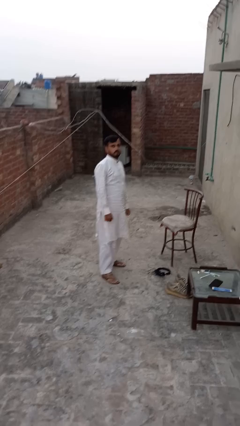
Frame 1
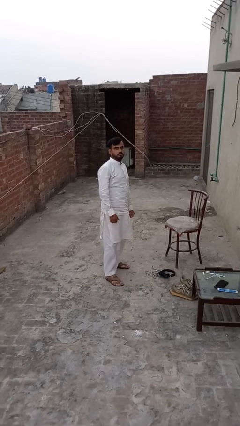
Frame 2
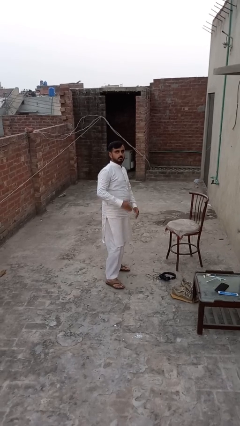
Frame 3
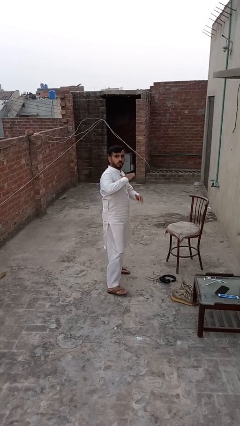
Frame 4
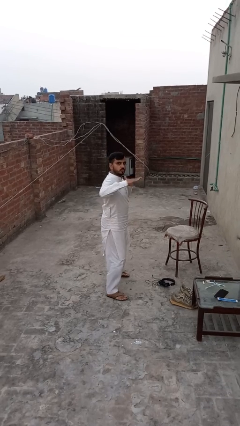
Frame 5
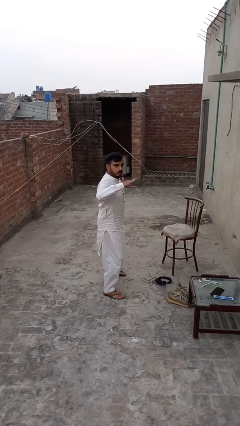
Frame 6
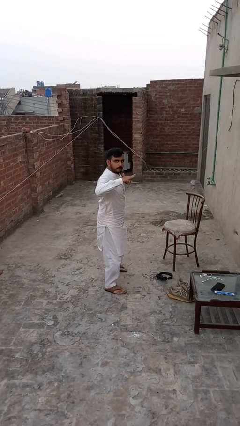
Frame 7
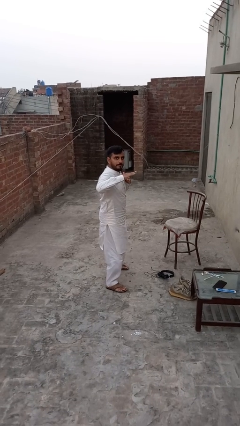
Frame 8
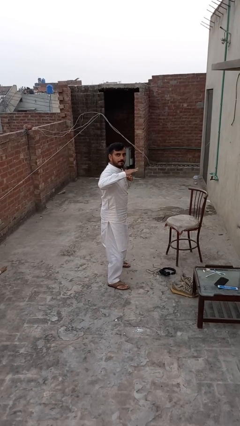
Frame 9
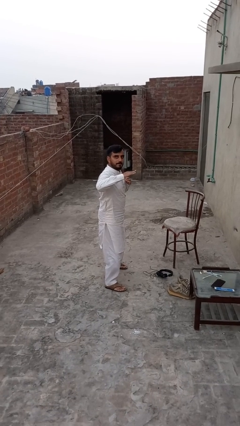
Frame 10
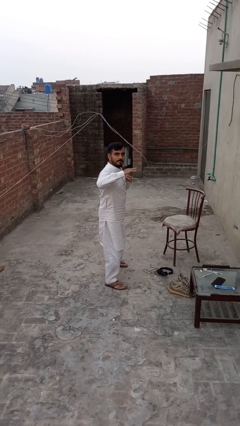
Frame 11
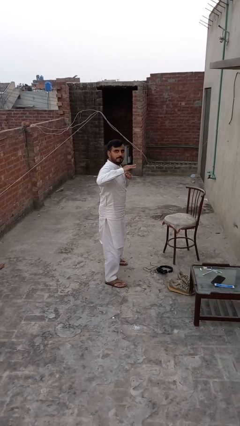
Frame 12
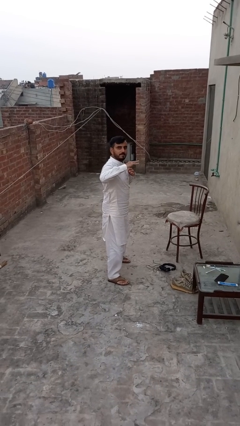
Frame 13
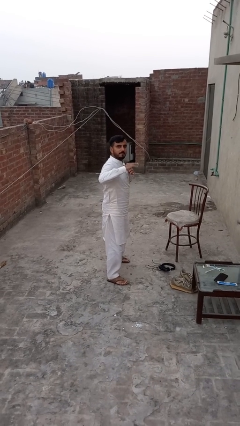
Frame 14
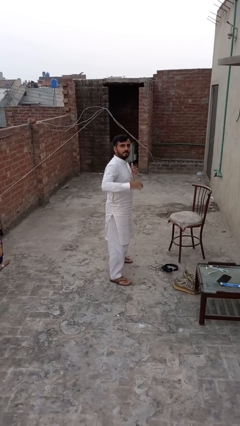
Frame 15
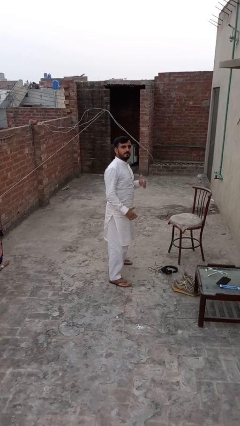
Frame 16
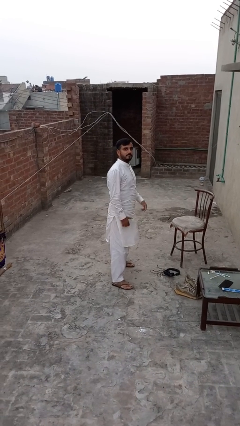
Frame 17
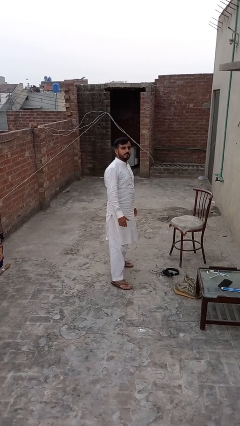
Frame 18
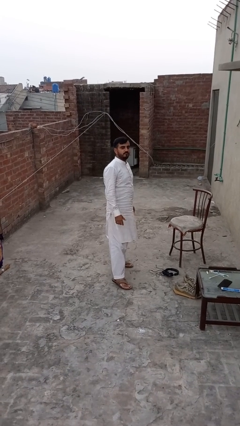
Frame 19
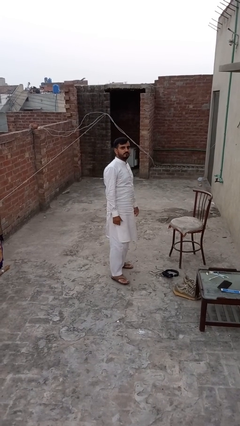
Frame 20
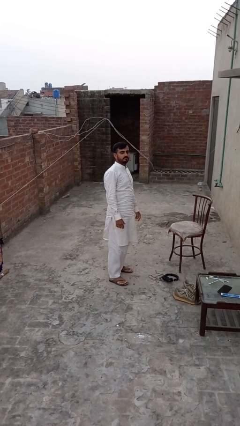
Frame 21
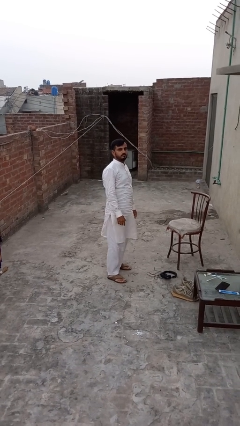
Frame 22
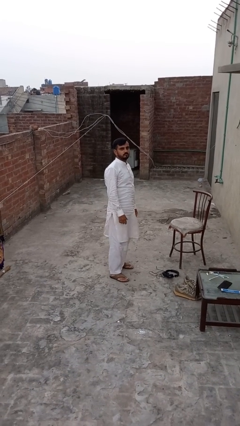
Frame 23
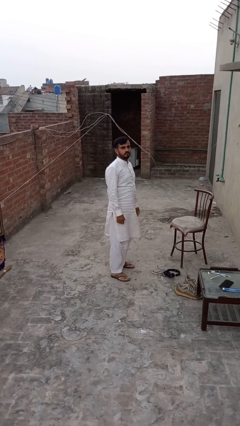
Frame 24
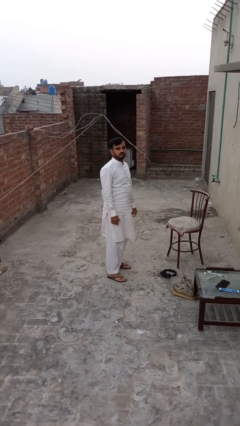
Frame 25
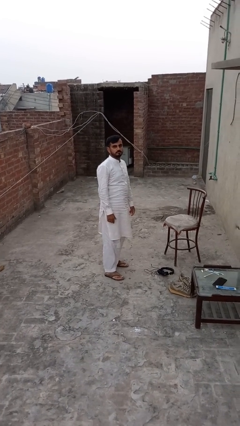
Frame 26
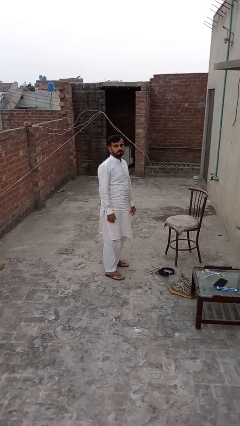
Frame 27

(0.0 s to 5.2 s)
person karate chop

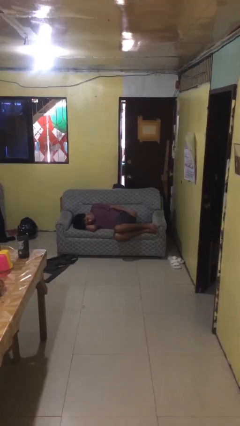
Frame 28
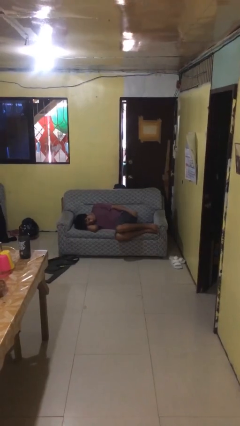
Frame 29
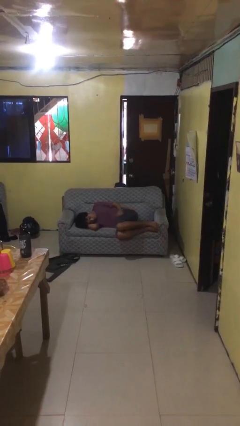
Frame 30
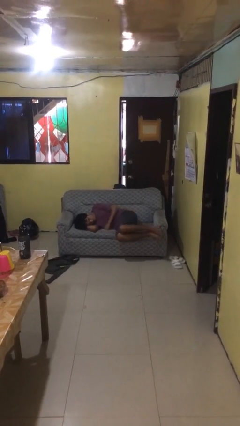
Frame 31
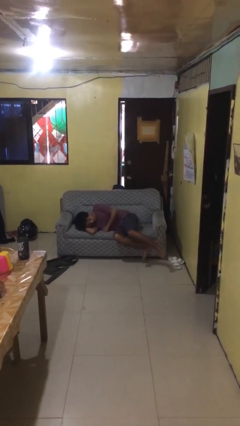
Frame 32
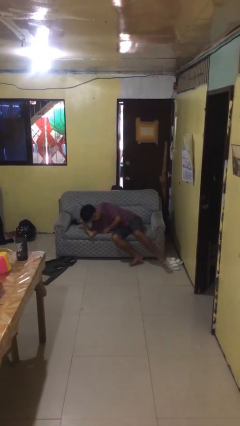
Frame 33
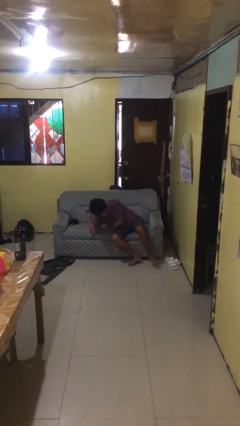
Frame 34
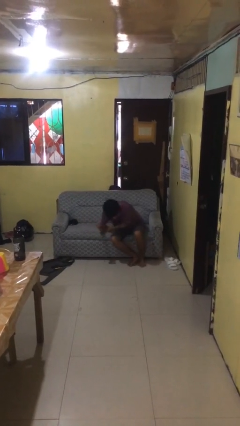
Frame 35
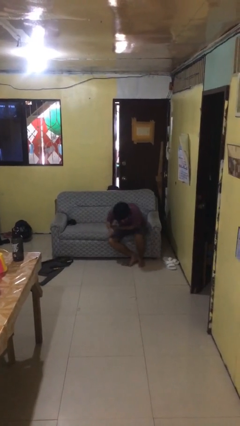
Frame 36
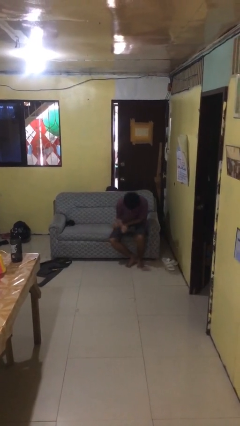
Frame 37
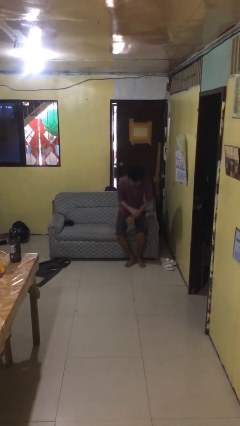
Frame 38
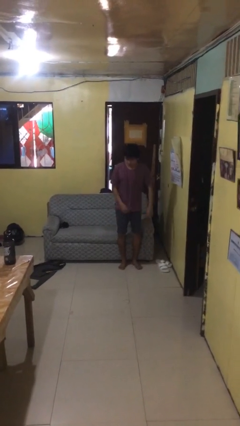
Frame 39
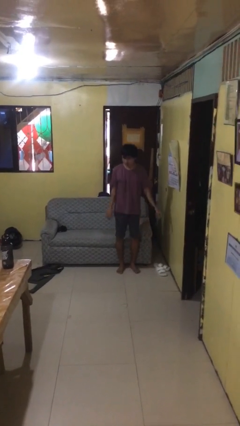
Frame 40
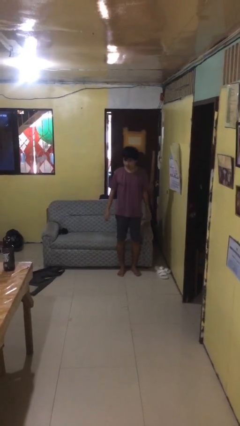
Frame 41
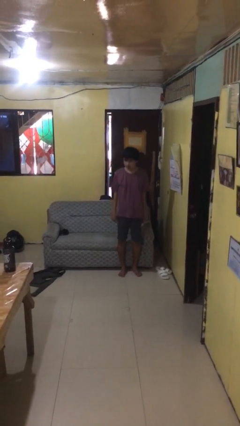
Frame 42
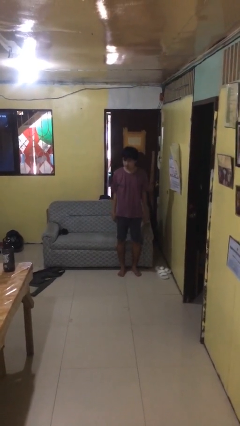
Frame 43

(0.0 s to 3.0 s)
person stands up

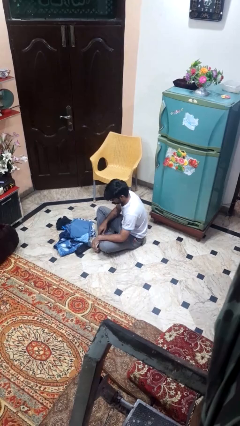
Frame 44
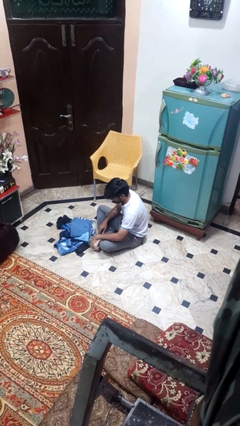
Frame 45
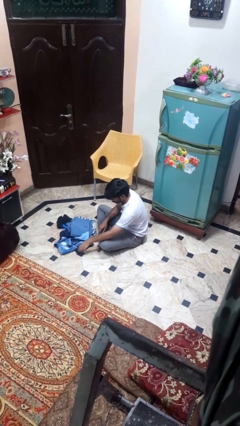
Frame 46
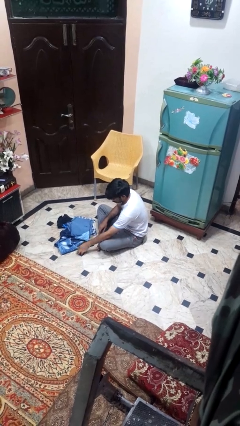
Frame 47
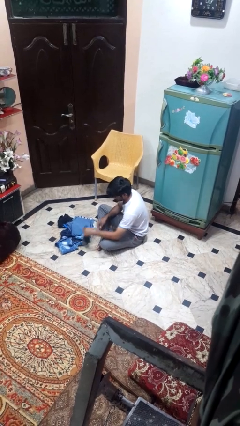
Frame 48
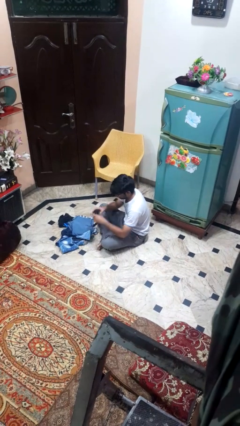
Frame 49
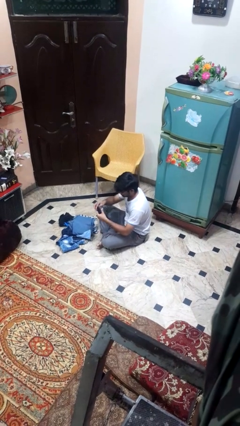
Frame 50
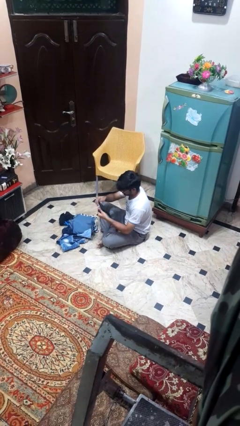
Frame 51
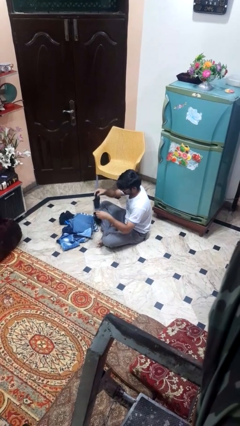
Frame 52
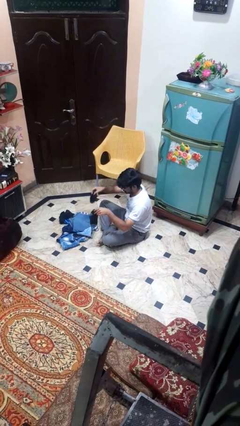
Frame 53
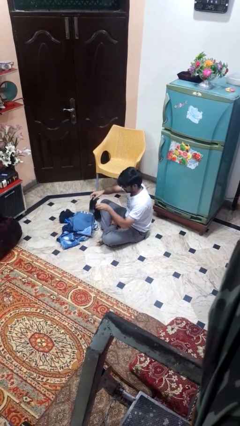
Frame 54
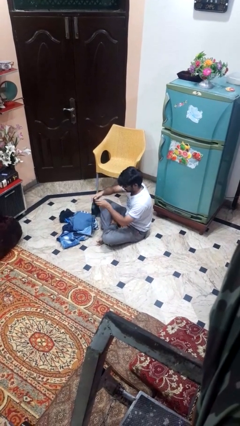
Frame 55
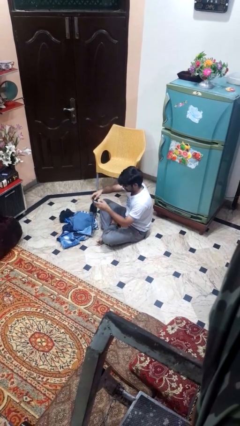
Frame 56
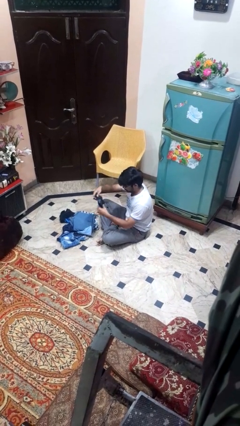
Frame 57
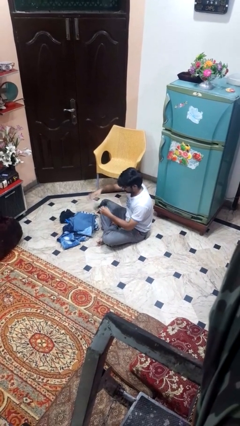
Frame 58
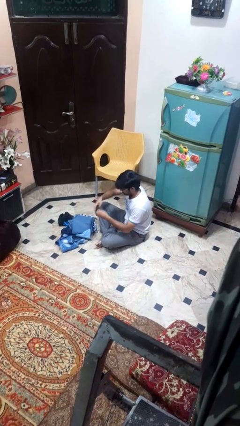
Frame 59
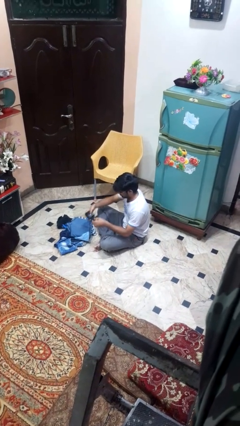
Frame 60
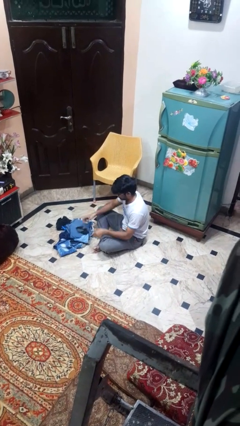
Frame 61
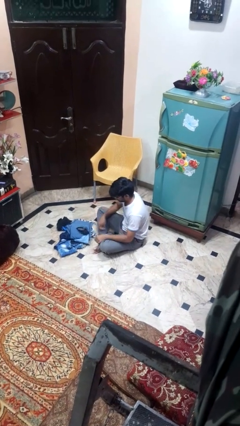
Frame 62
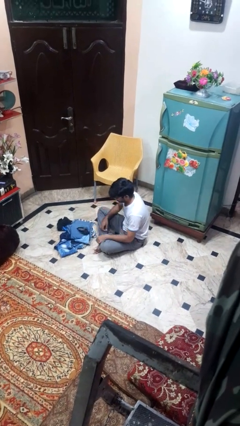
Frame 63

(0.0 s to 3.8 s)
person folds socks

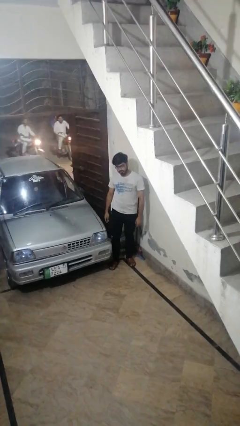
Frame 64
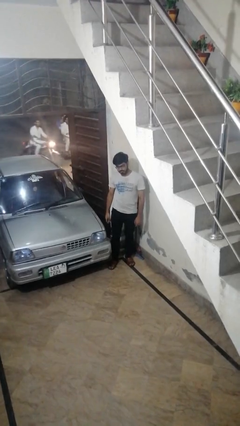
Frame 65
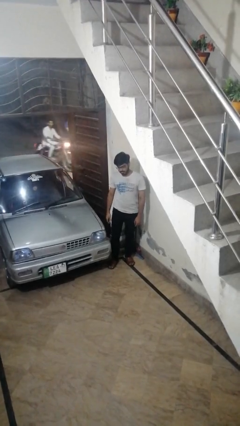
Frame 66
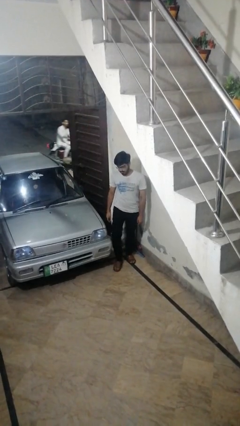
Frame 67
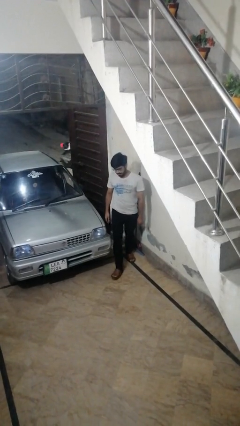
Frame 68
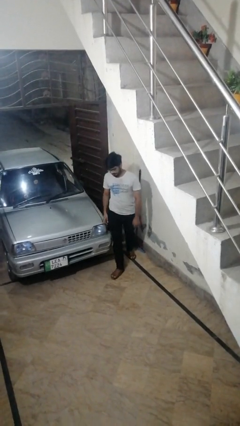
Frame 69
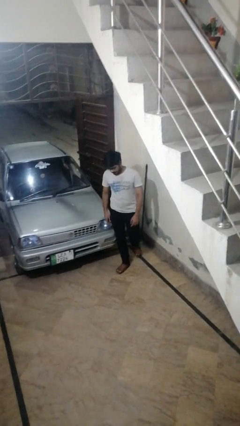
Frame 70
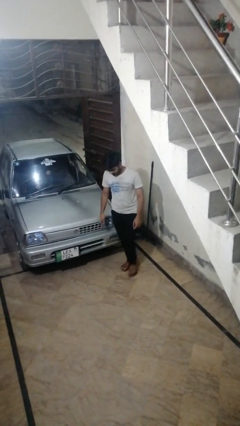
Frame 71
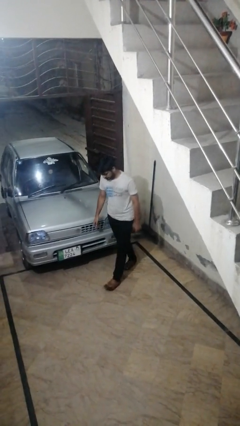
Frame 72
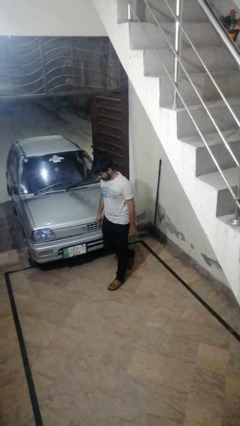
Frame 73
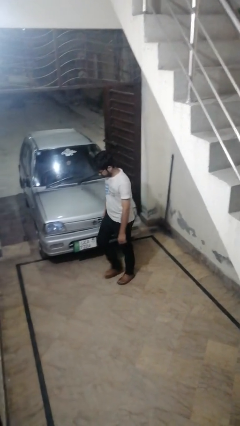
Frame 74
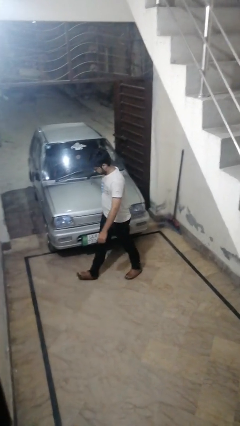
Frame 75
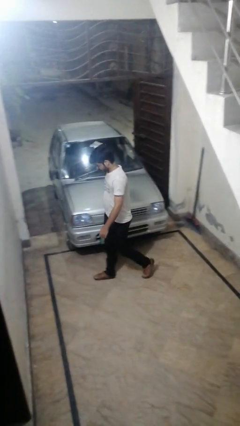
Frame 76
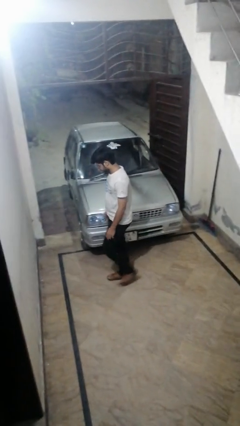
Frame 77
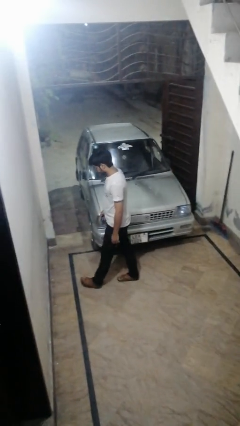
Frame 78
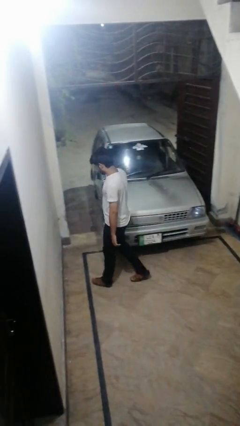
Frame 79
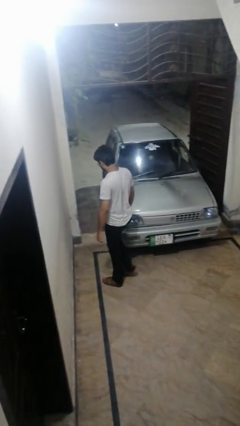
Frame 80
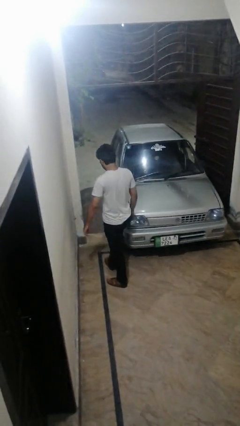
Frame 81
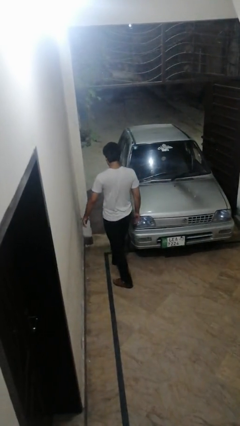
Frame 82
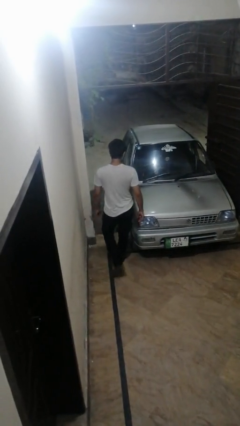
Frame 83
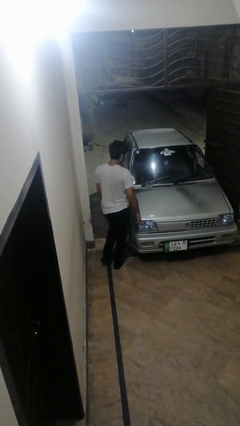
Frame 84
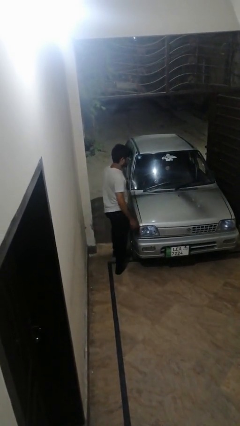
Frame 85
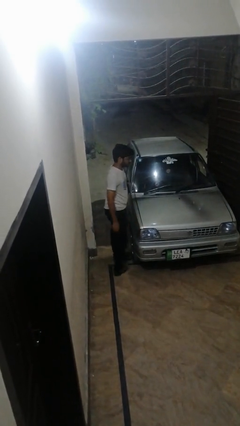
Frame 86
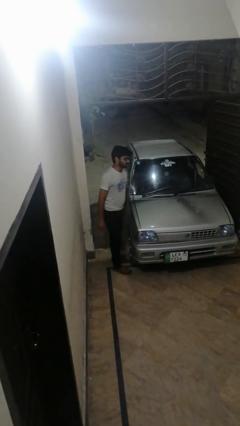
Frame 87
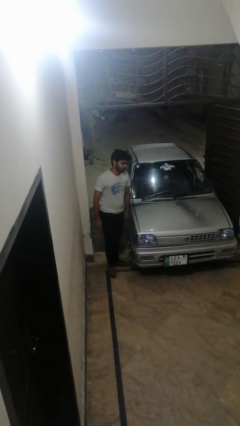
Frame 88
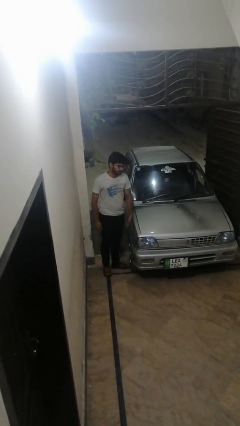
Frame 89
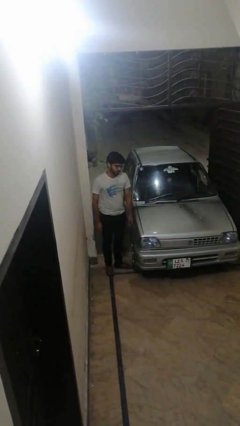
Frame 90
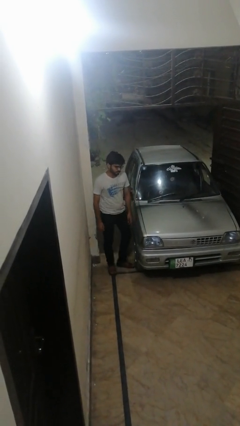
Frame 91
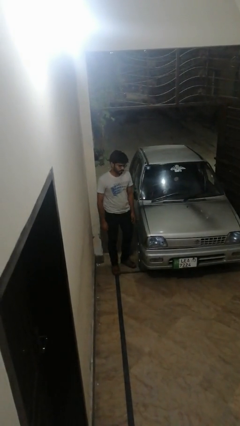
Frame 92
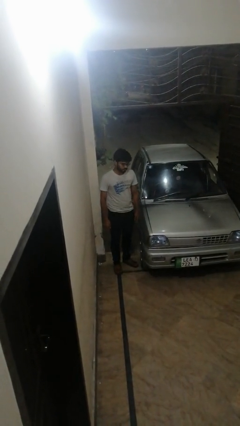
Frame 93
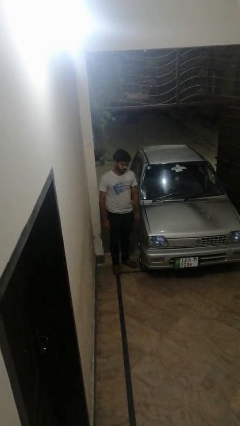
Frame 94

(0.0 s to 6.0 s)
person walks around car
